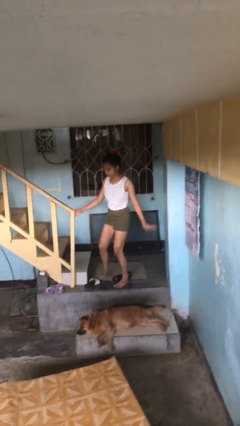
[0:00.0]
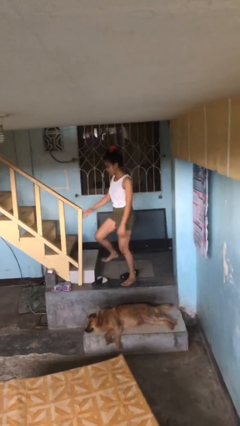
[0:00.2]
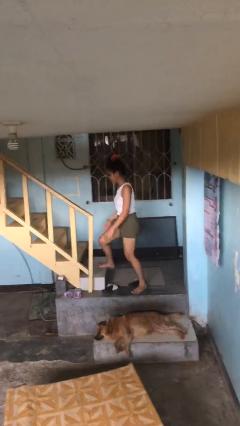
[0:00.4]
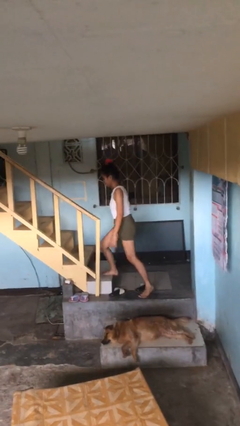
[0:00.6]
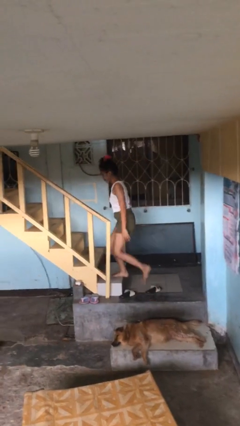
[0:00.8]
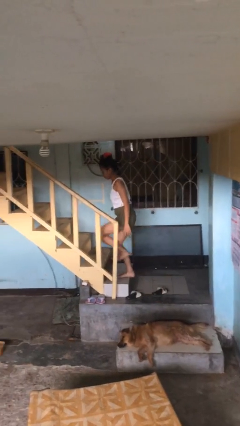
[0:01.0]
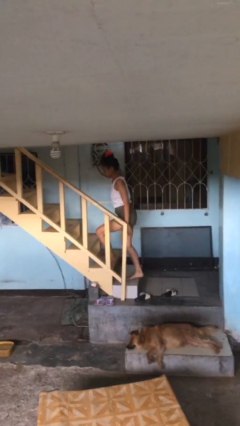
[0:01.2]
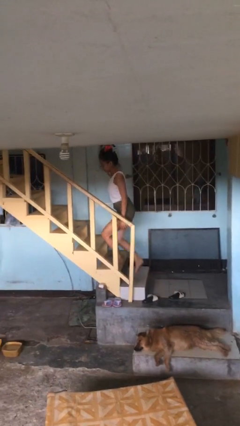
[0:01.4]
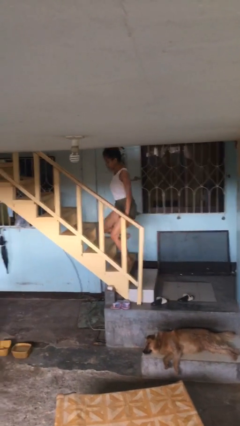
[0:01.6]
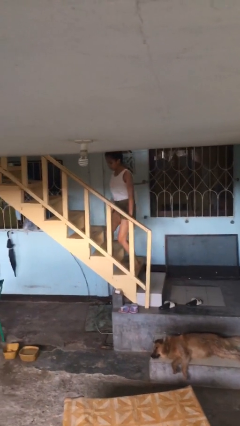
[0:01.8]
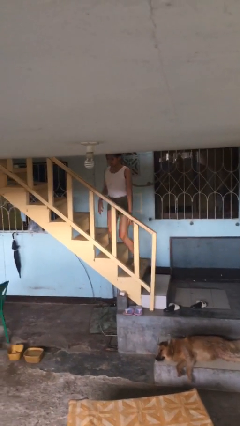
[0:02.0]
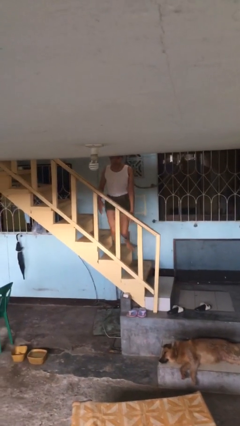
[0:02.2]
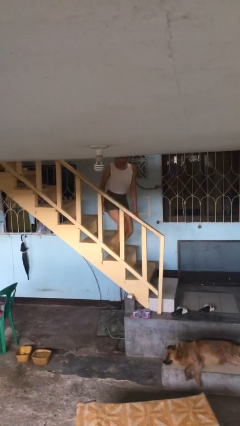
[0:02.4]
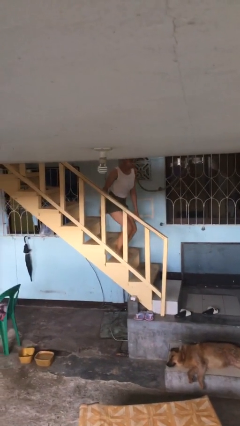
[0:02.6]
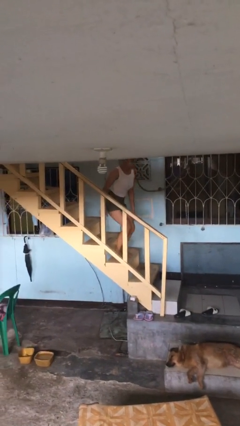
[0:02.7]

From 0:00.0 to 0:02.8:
person climbs up stairs

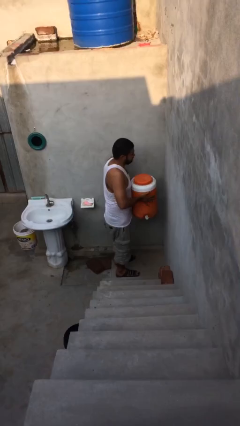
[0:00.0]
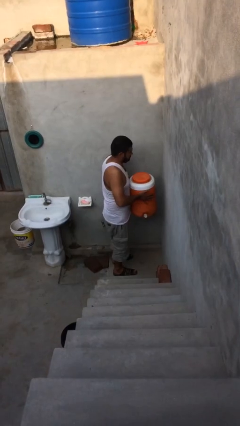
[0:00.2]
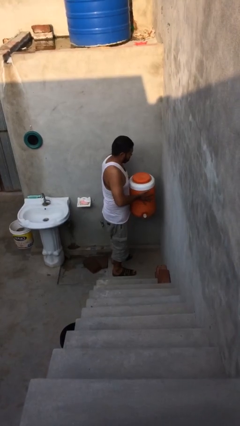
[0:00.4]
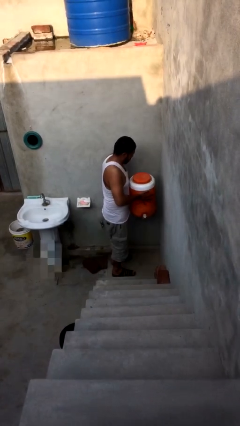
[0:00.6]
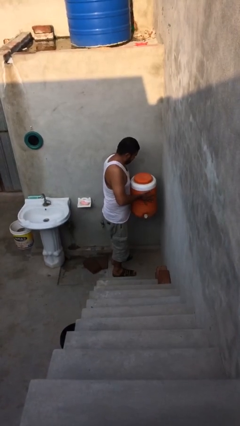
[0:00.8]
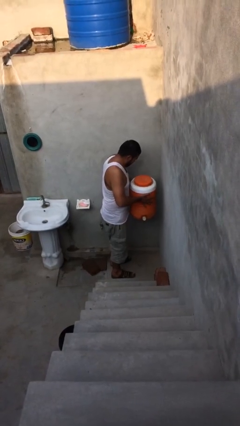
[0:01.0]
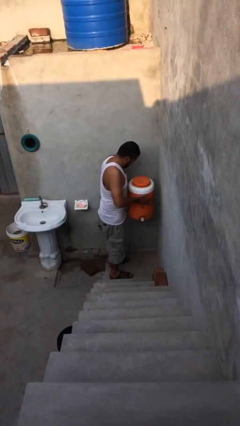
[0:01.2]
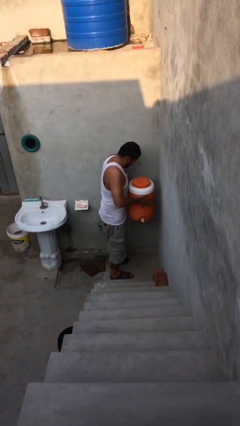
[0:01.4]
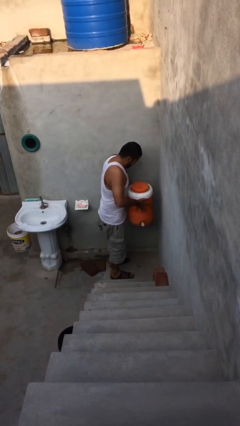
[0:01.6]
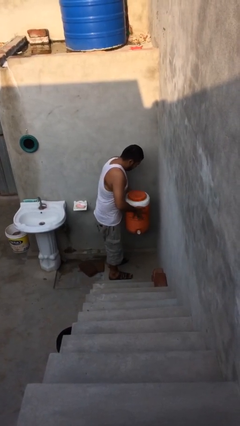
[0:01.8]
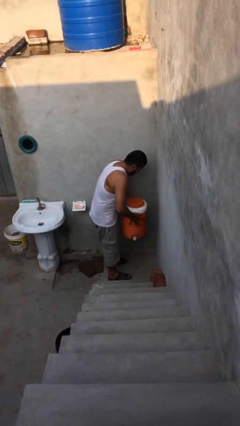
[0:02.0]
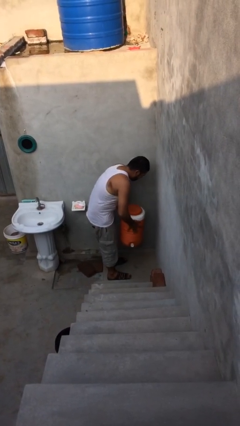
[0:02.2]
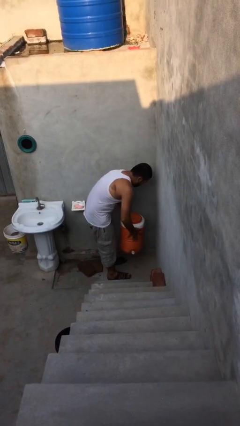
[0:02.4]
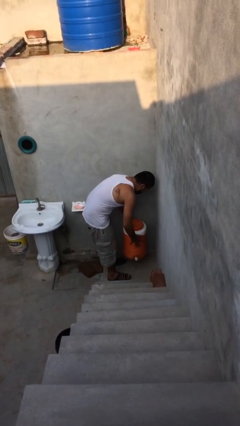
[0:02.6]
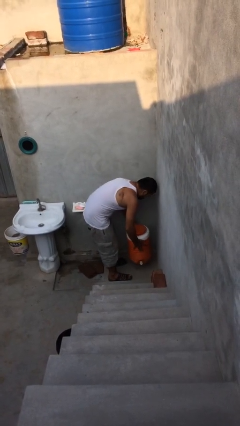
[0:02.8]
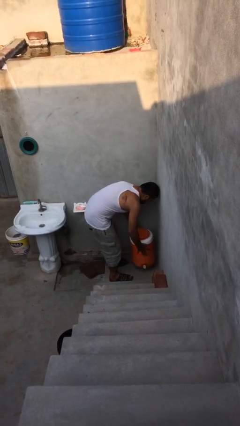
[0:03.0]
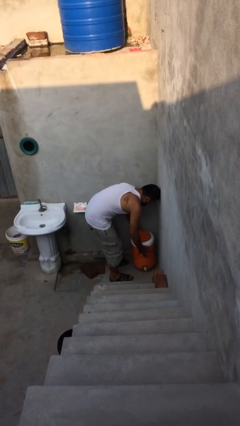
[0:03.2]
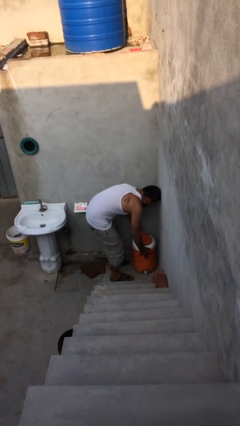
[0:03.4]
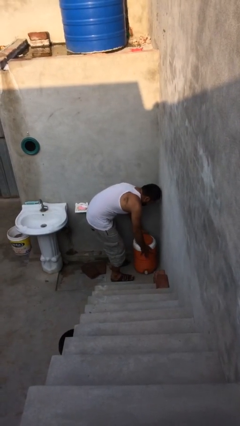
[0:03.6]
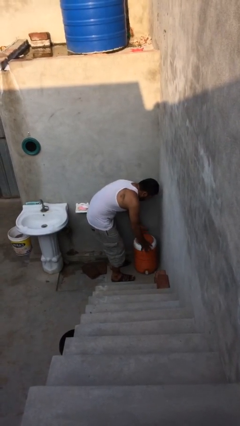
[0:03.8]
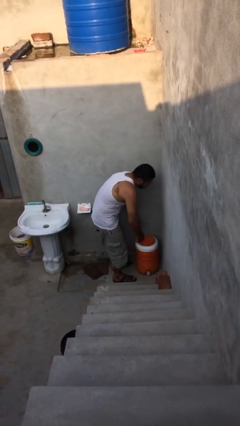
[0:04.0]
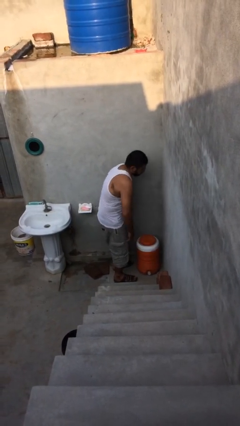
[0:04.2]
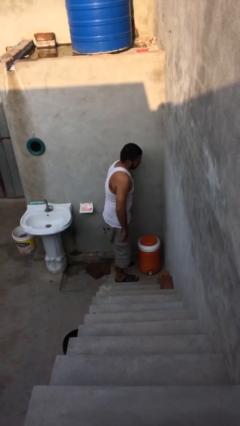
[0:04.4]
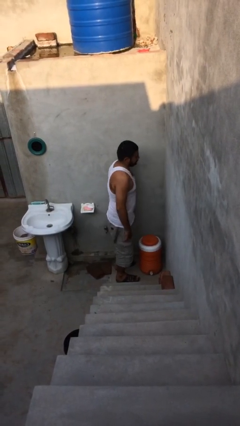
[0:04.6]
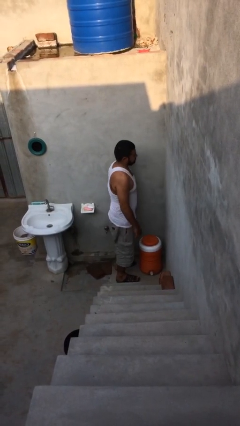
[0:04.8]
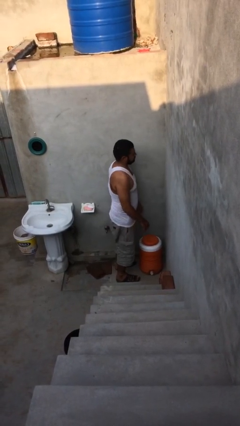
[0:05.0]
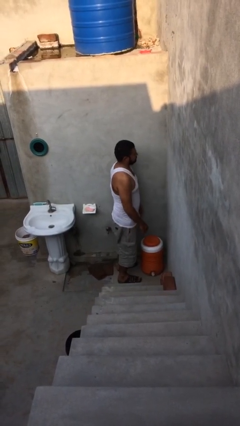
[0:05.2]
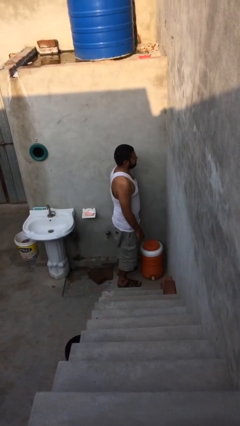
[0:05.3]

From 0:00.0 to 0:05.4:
person puts down object on floor

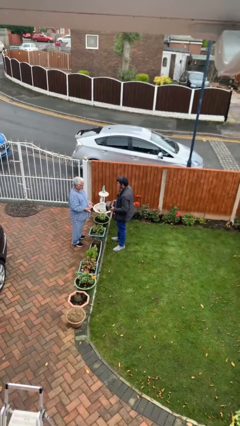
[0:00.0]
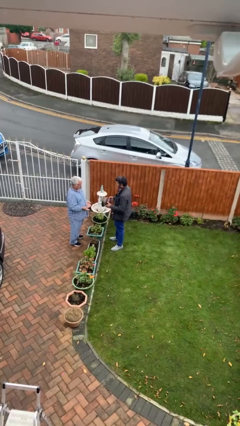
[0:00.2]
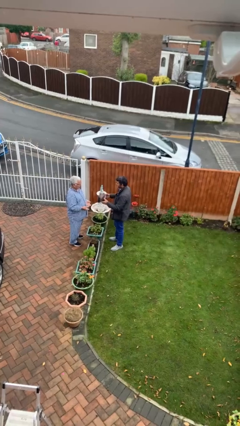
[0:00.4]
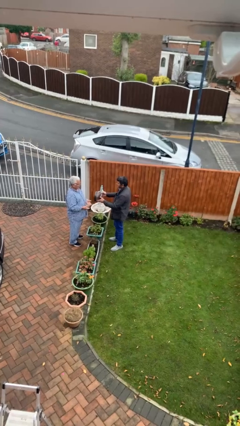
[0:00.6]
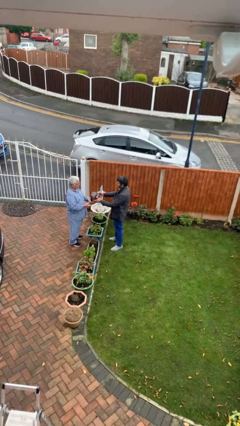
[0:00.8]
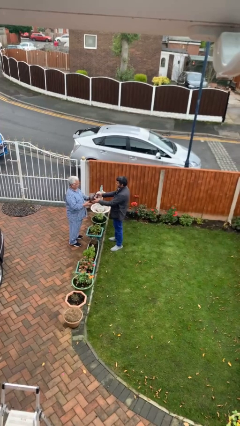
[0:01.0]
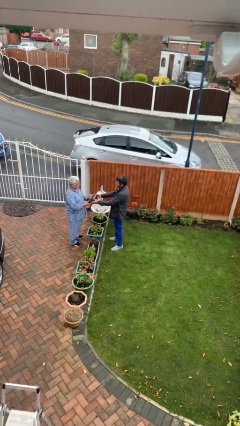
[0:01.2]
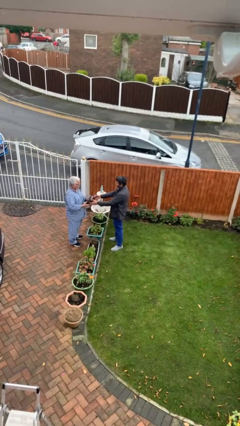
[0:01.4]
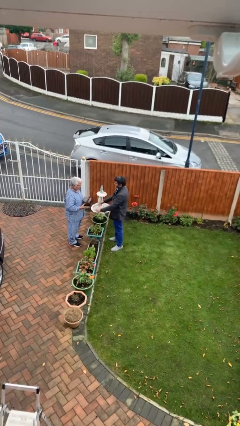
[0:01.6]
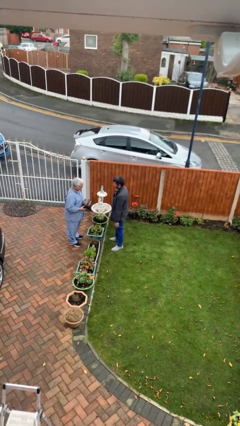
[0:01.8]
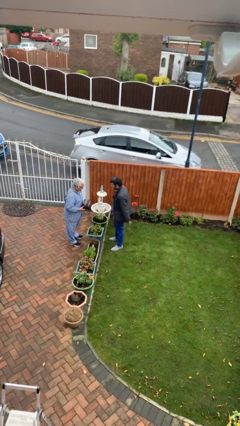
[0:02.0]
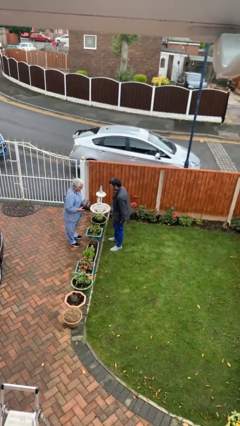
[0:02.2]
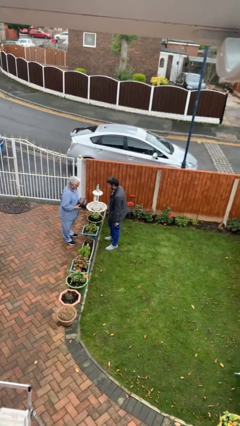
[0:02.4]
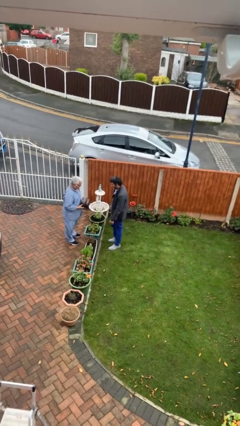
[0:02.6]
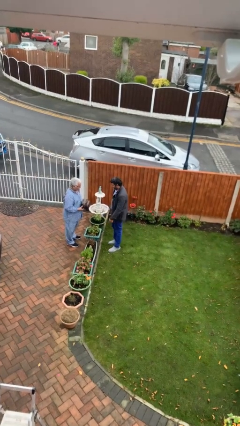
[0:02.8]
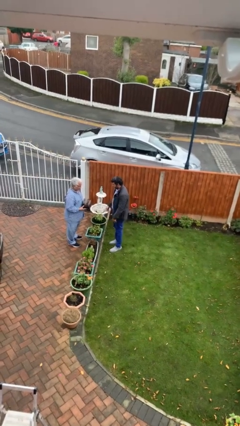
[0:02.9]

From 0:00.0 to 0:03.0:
person transfers object to person

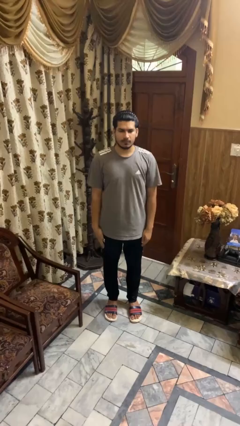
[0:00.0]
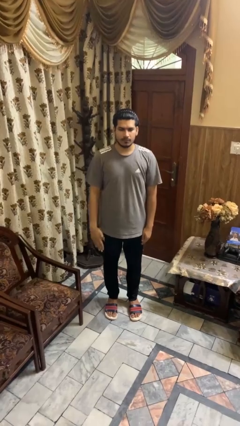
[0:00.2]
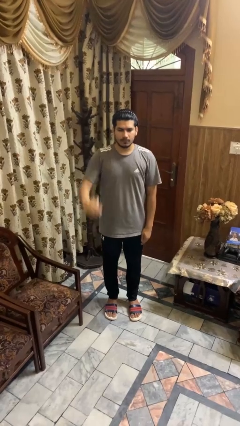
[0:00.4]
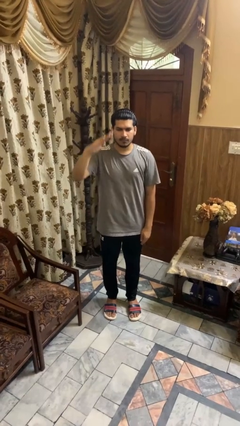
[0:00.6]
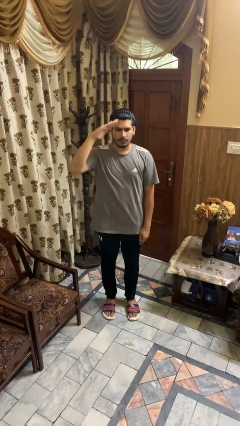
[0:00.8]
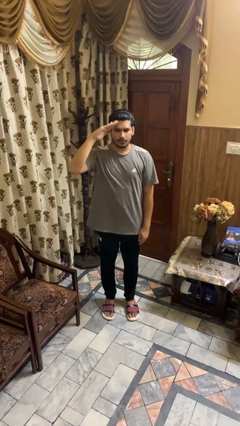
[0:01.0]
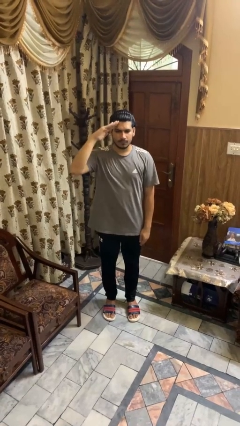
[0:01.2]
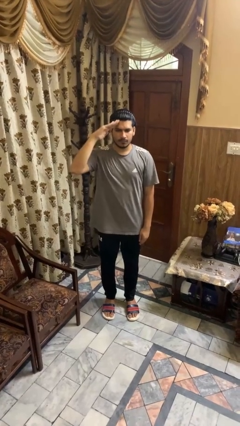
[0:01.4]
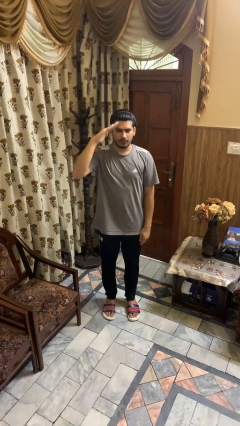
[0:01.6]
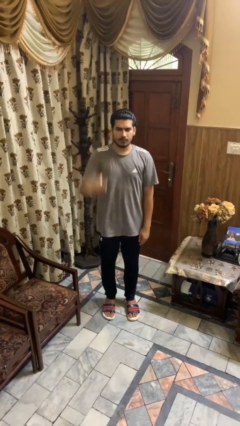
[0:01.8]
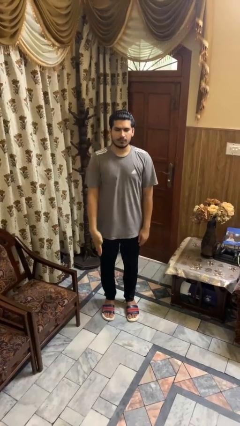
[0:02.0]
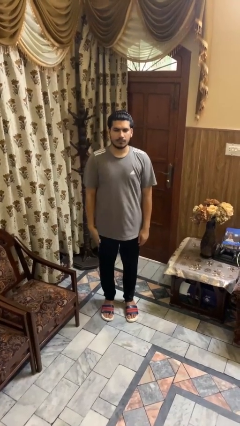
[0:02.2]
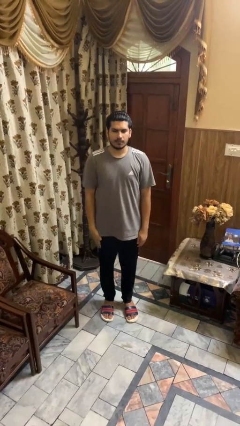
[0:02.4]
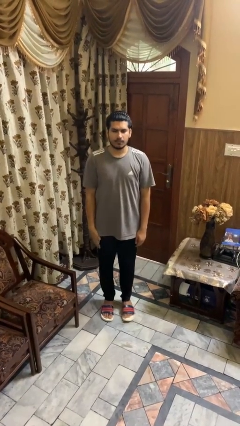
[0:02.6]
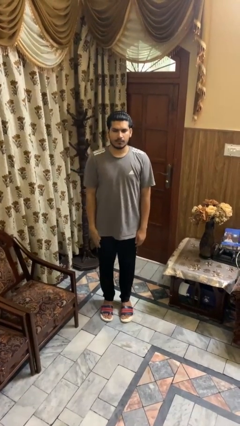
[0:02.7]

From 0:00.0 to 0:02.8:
person salutes

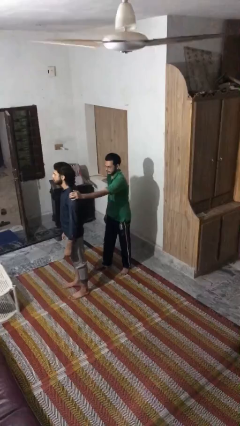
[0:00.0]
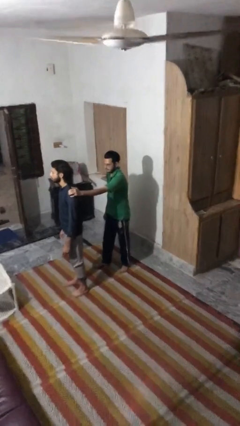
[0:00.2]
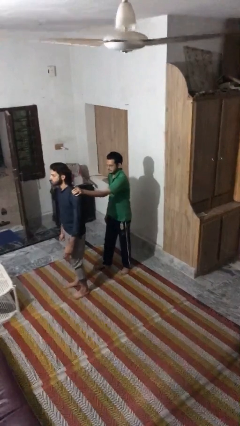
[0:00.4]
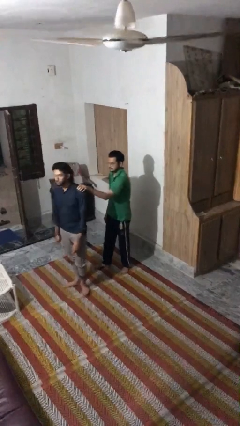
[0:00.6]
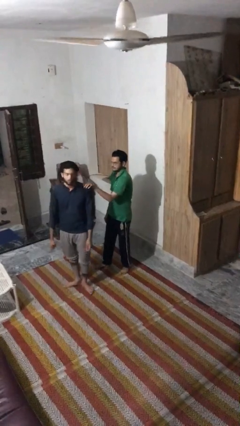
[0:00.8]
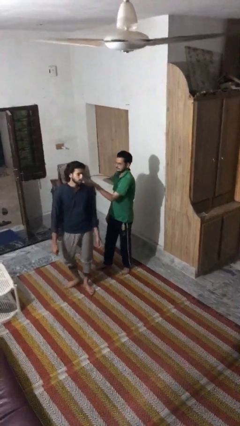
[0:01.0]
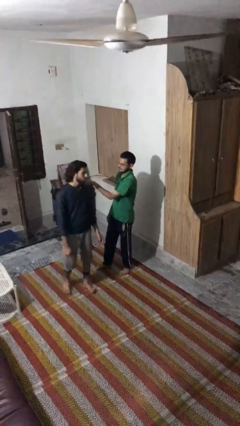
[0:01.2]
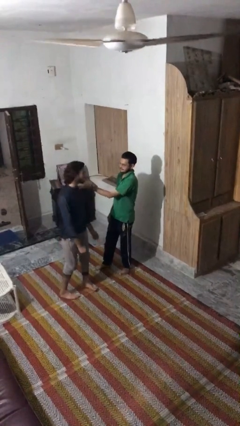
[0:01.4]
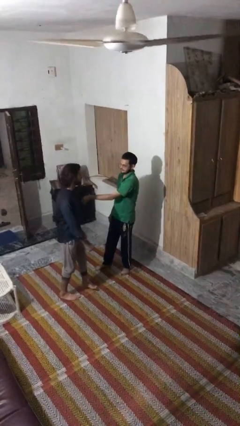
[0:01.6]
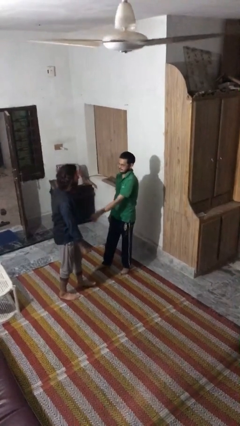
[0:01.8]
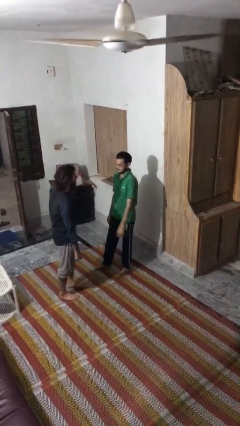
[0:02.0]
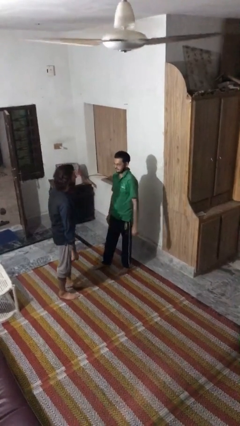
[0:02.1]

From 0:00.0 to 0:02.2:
person spins person around

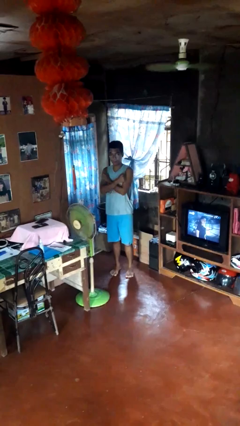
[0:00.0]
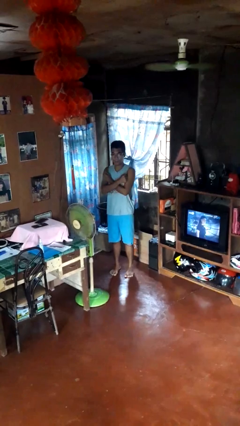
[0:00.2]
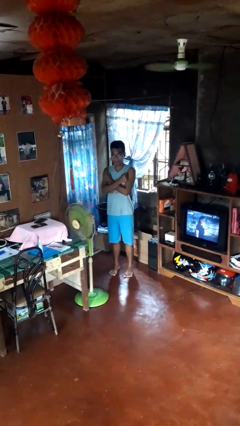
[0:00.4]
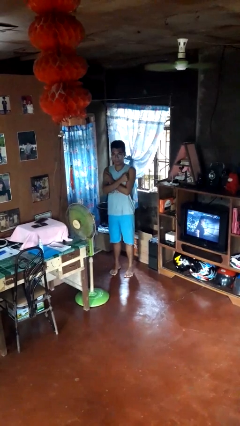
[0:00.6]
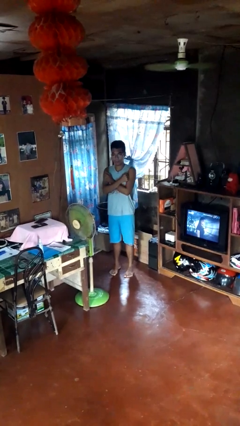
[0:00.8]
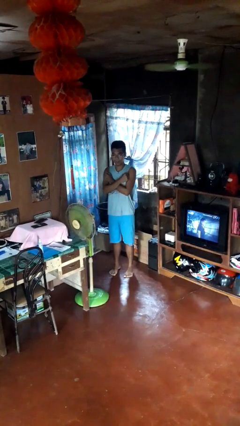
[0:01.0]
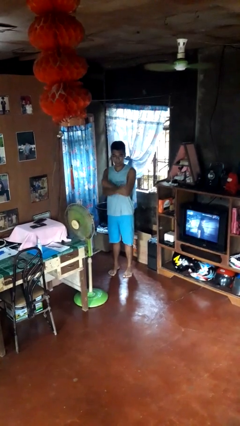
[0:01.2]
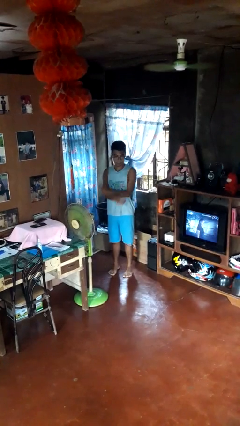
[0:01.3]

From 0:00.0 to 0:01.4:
person gestures arms x
